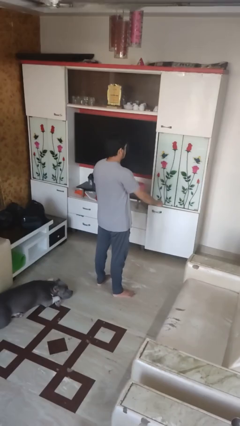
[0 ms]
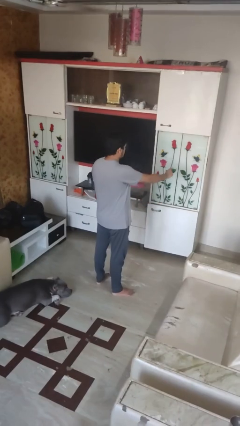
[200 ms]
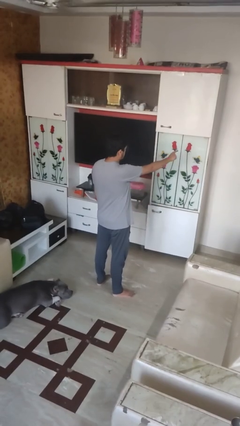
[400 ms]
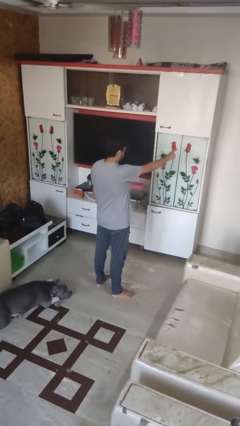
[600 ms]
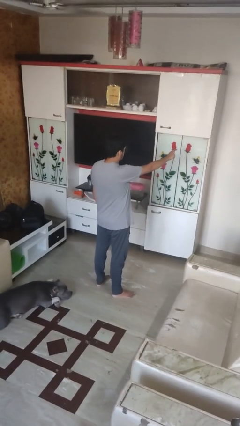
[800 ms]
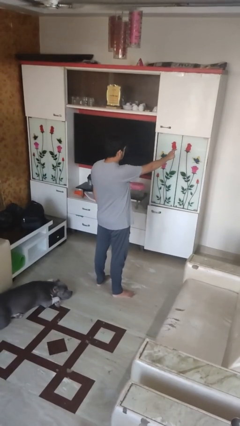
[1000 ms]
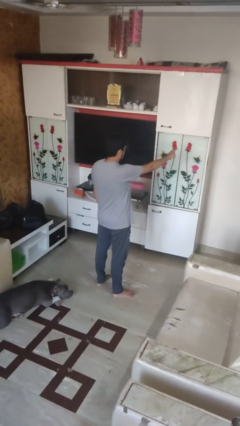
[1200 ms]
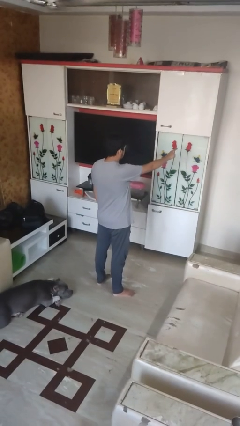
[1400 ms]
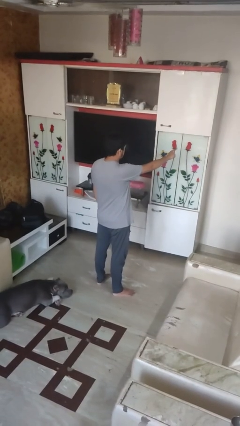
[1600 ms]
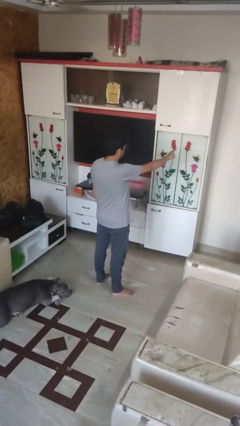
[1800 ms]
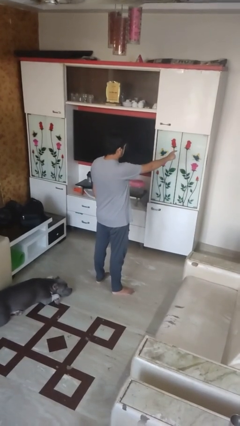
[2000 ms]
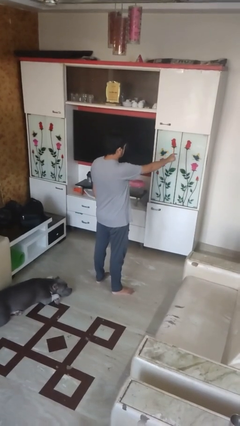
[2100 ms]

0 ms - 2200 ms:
person points at person

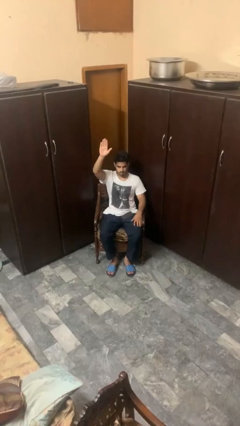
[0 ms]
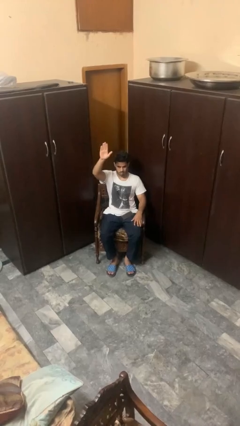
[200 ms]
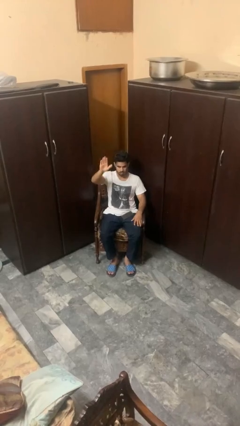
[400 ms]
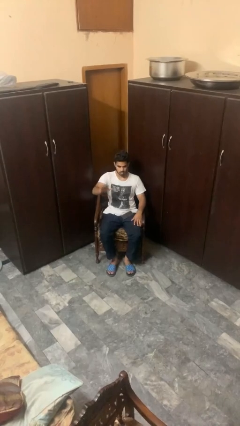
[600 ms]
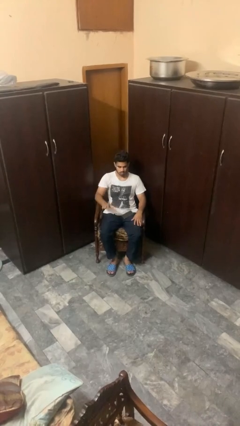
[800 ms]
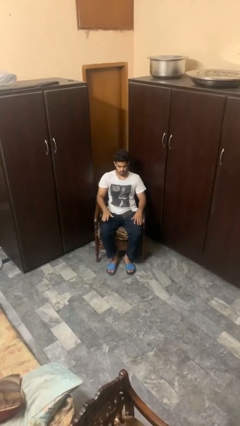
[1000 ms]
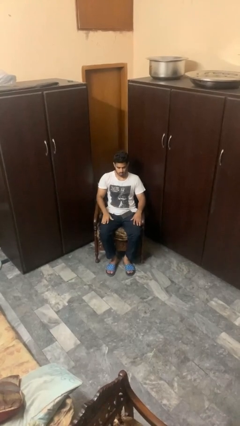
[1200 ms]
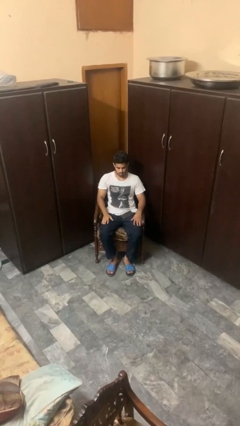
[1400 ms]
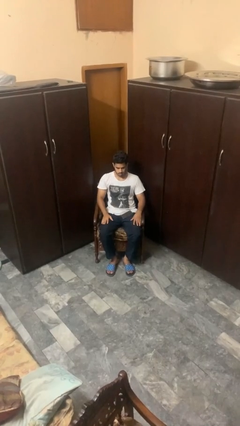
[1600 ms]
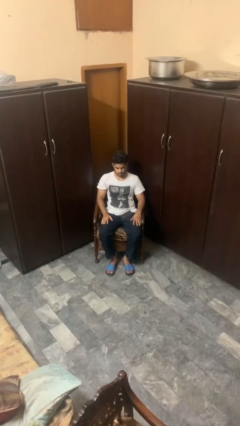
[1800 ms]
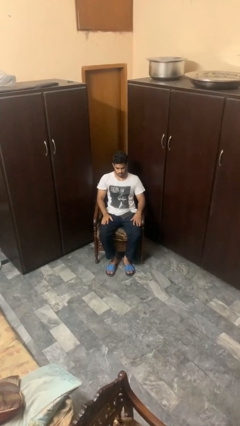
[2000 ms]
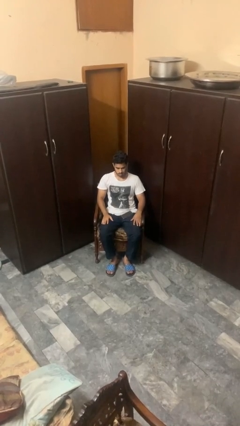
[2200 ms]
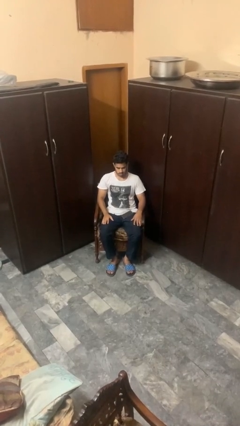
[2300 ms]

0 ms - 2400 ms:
person gestures lower hand

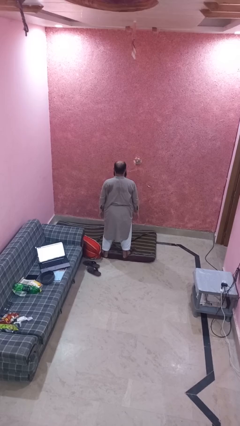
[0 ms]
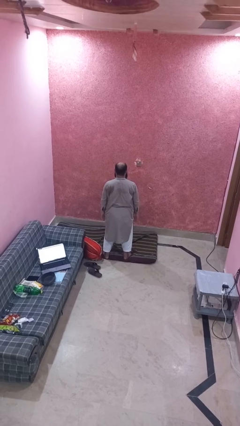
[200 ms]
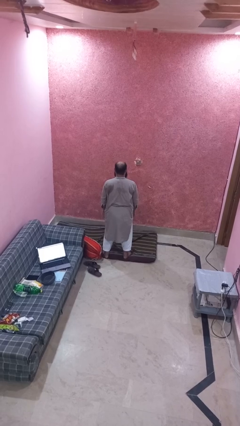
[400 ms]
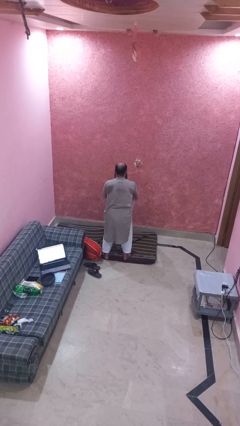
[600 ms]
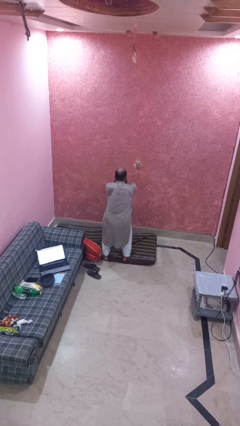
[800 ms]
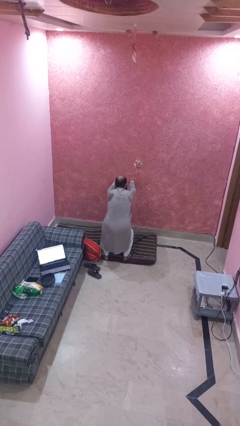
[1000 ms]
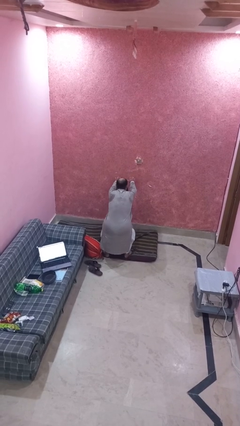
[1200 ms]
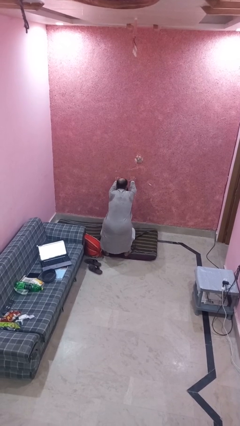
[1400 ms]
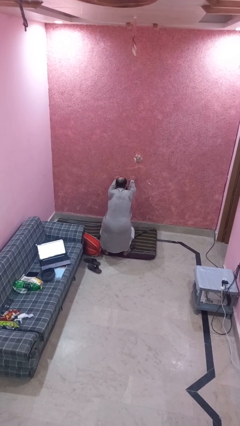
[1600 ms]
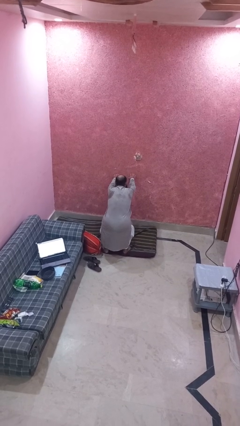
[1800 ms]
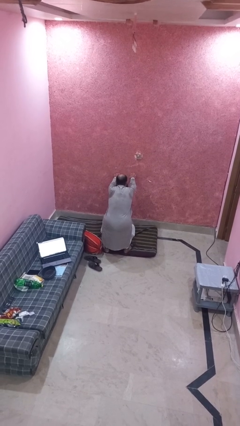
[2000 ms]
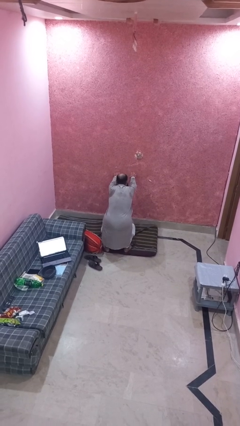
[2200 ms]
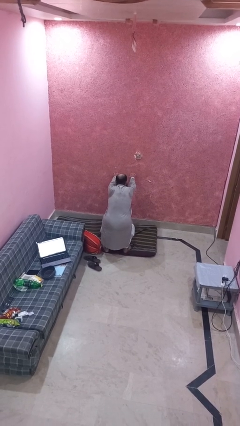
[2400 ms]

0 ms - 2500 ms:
person squats

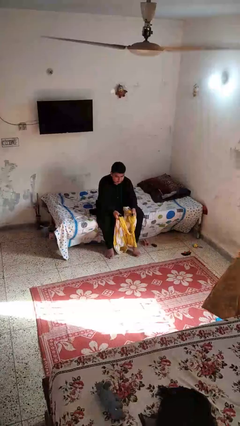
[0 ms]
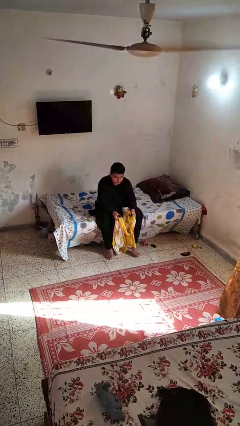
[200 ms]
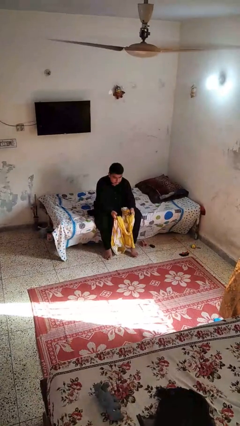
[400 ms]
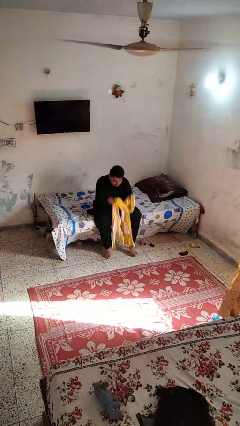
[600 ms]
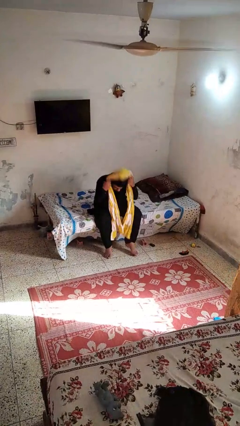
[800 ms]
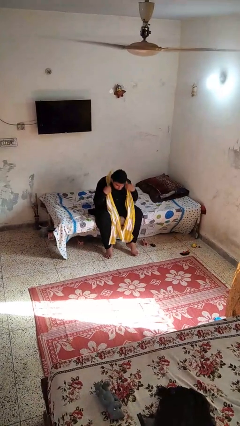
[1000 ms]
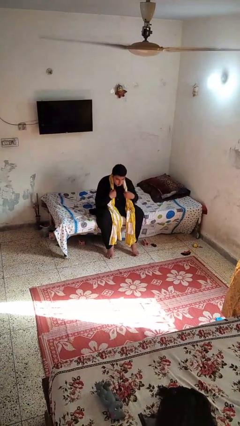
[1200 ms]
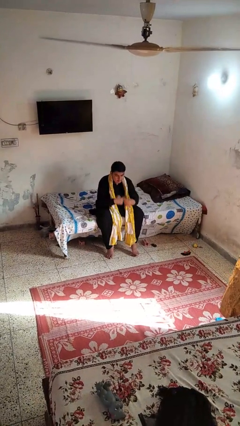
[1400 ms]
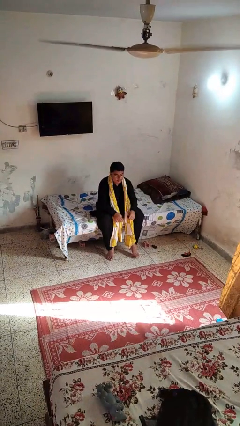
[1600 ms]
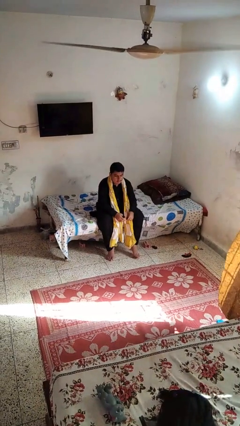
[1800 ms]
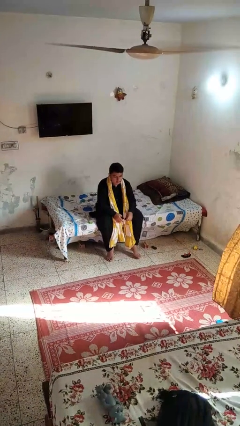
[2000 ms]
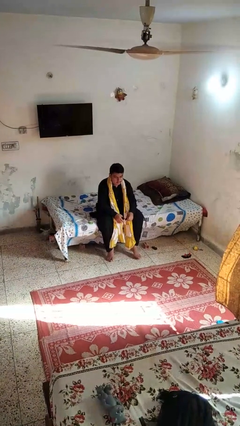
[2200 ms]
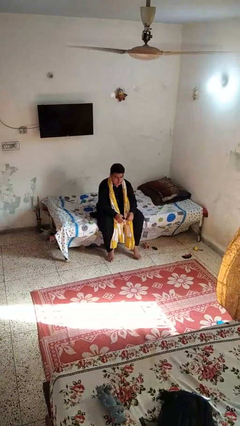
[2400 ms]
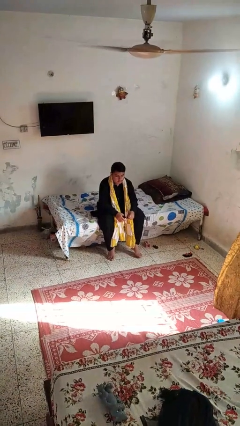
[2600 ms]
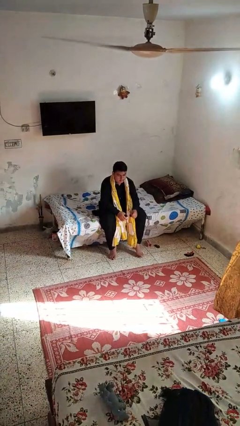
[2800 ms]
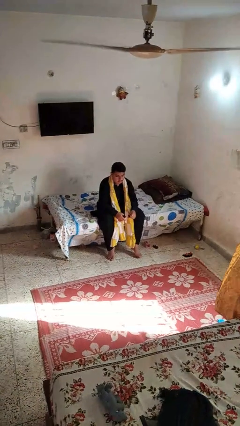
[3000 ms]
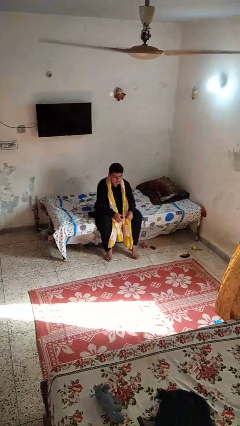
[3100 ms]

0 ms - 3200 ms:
person puts on scarf

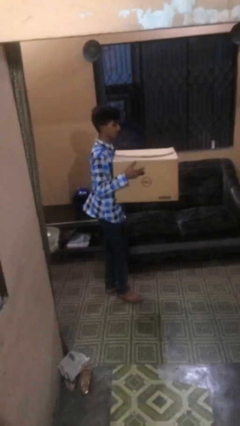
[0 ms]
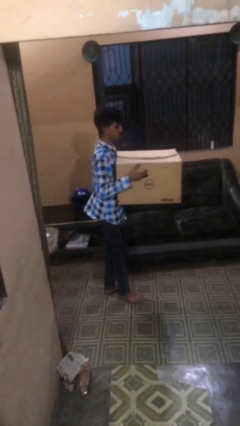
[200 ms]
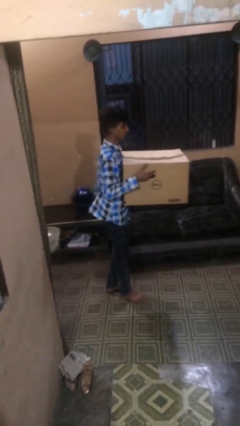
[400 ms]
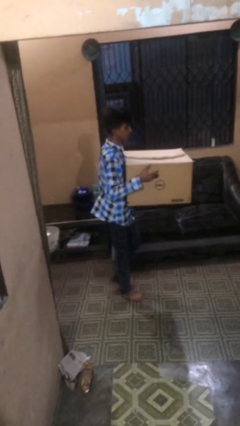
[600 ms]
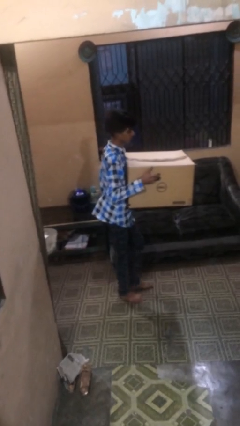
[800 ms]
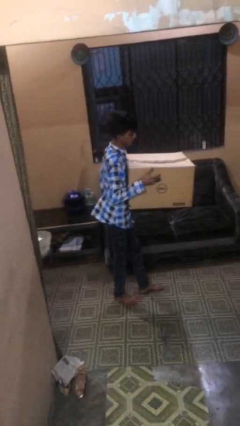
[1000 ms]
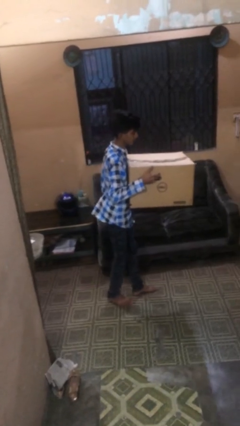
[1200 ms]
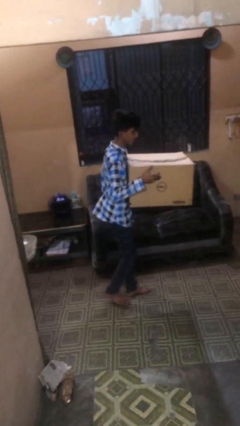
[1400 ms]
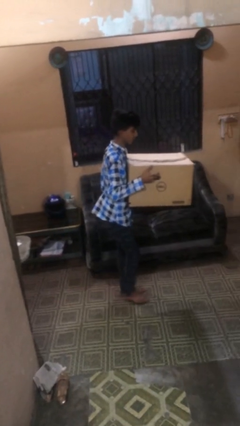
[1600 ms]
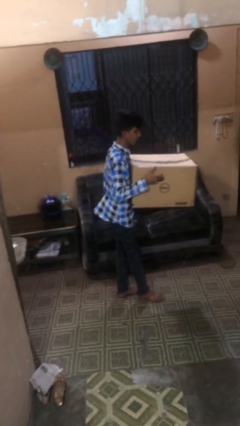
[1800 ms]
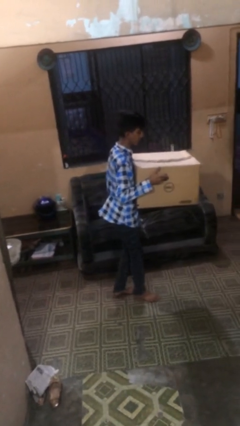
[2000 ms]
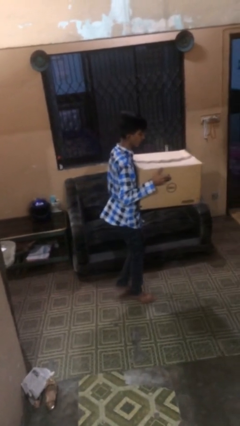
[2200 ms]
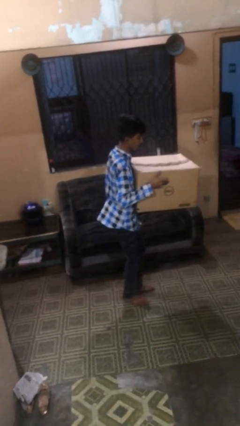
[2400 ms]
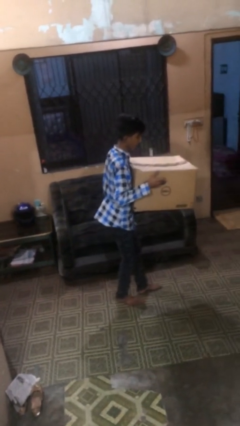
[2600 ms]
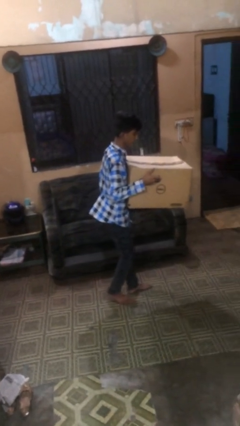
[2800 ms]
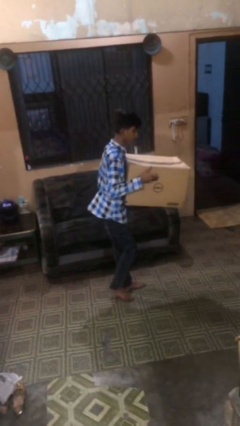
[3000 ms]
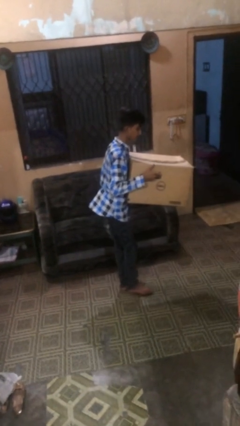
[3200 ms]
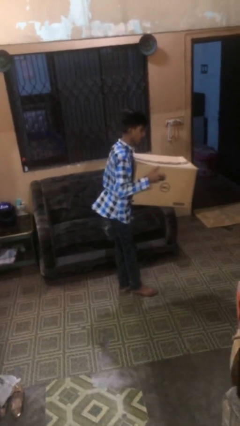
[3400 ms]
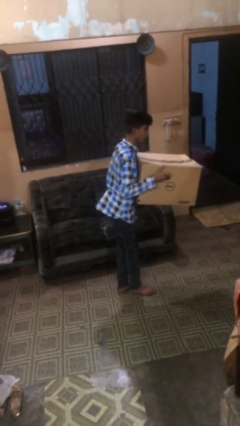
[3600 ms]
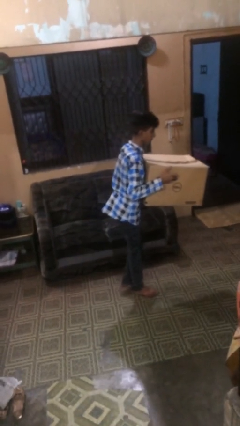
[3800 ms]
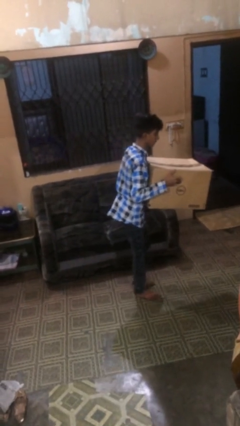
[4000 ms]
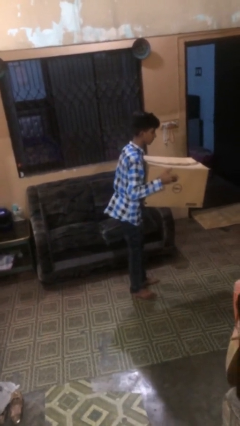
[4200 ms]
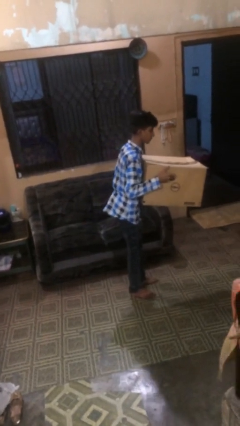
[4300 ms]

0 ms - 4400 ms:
person carries heavy object

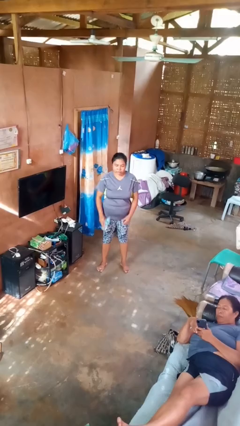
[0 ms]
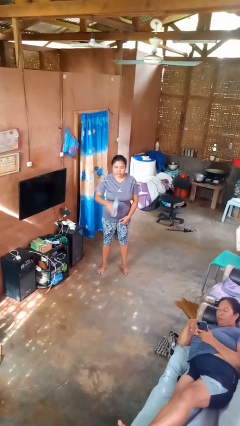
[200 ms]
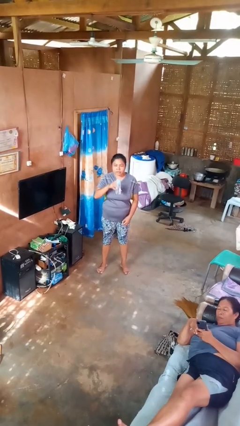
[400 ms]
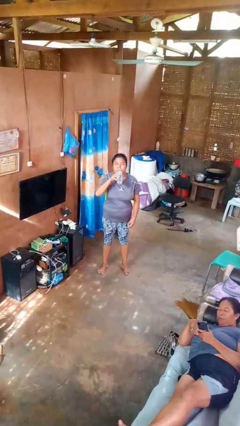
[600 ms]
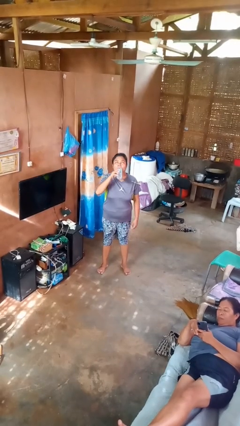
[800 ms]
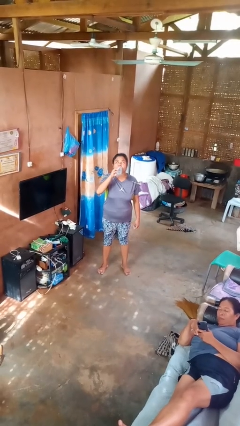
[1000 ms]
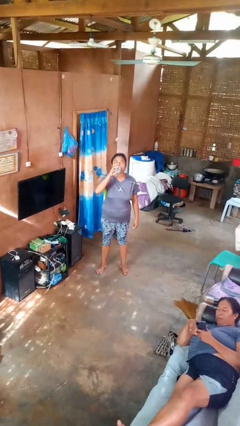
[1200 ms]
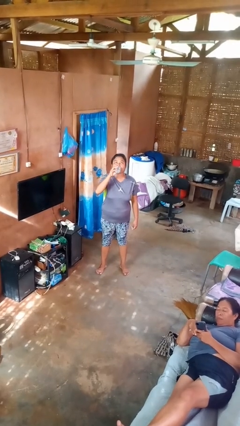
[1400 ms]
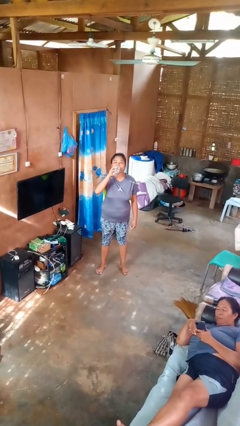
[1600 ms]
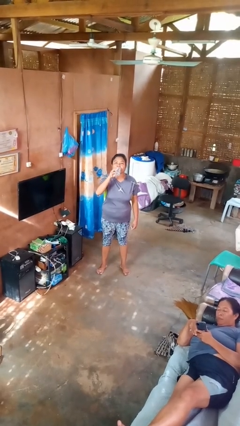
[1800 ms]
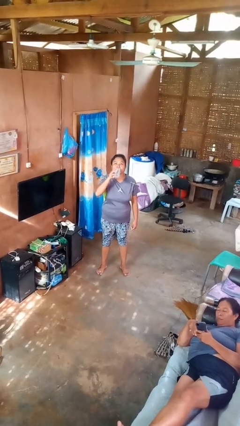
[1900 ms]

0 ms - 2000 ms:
person drinks from bottle

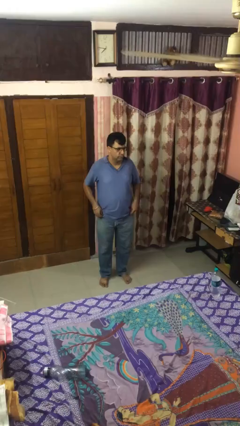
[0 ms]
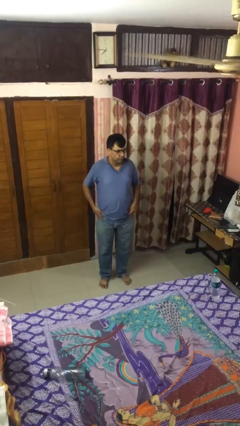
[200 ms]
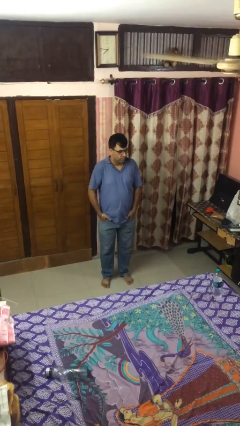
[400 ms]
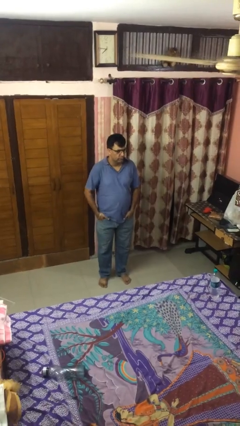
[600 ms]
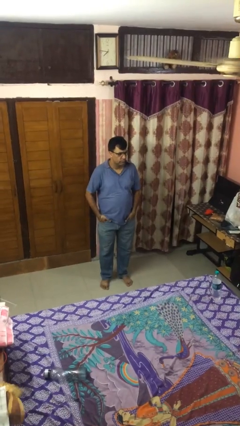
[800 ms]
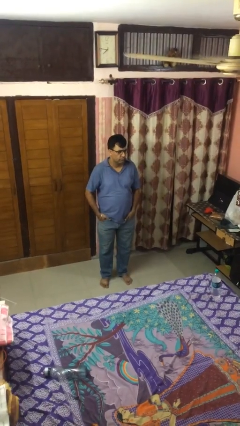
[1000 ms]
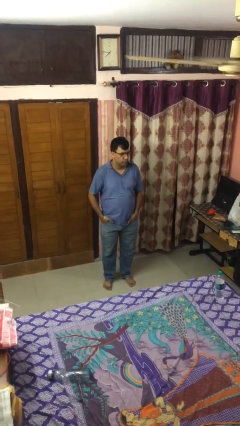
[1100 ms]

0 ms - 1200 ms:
person puts hands in back pockets
